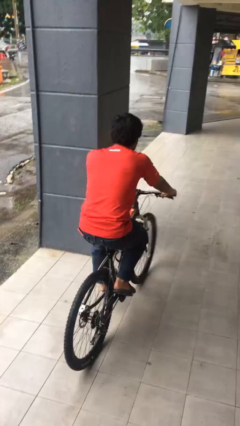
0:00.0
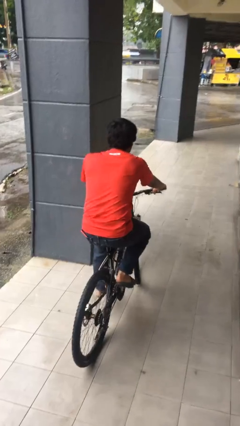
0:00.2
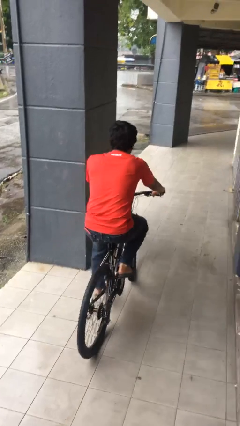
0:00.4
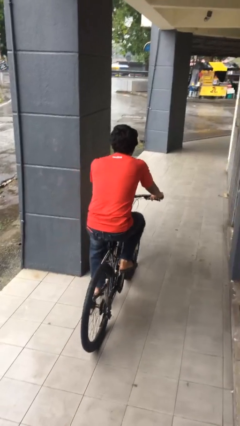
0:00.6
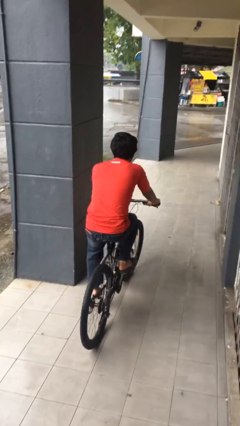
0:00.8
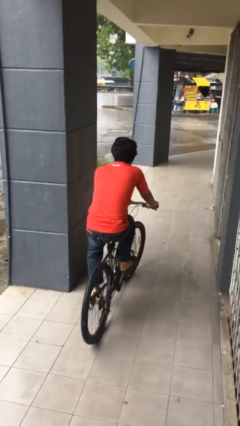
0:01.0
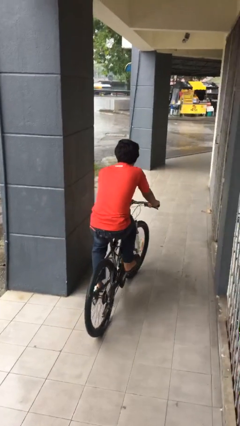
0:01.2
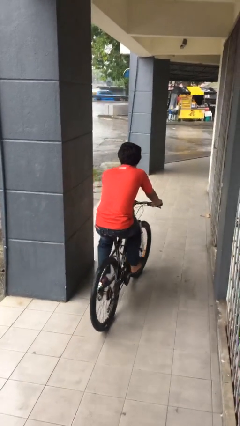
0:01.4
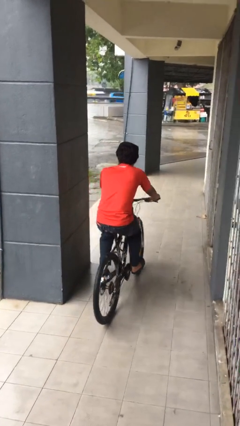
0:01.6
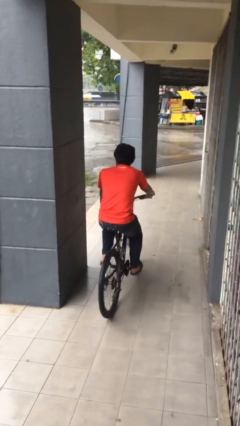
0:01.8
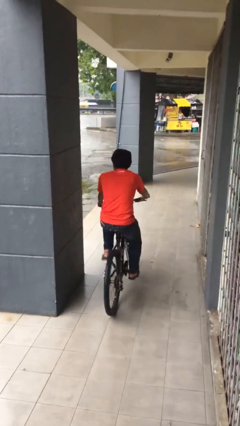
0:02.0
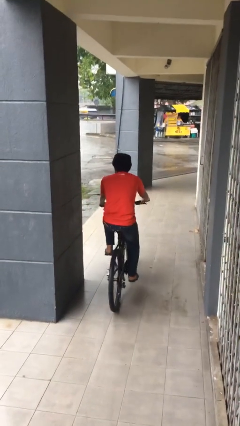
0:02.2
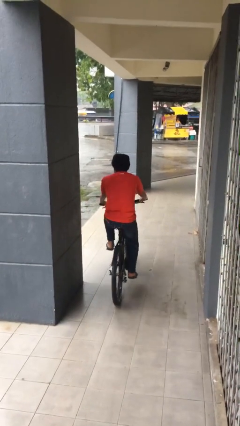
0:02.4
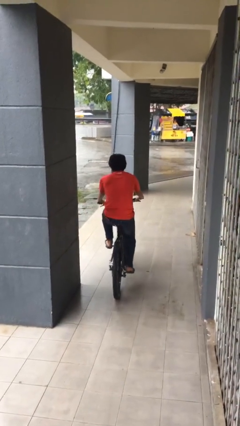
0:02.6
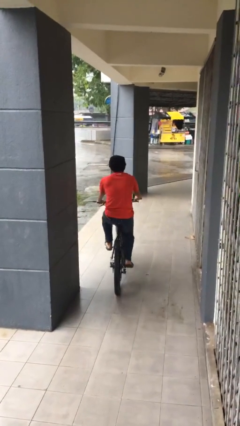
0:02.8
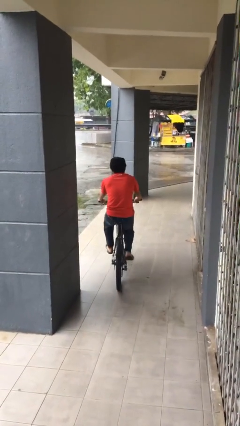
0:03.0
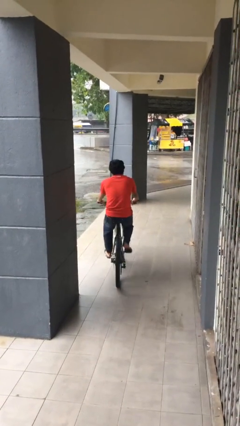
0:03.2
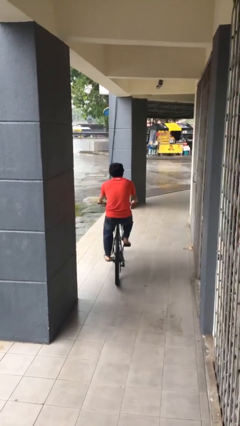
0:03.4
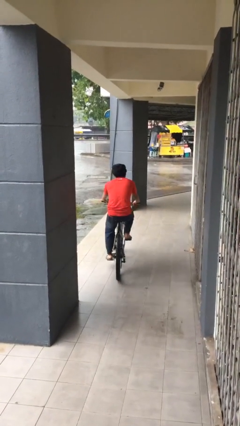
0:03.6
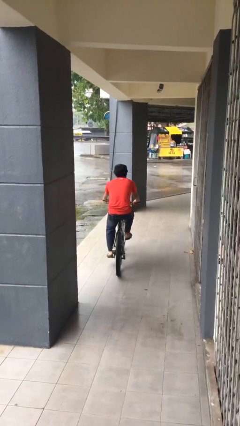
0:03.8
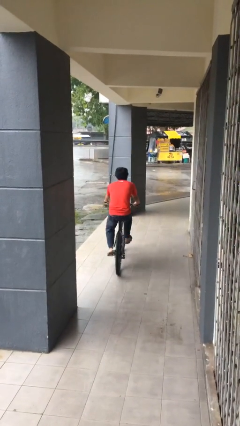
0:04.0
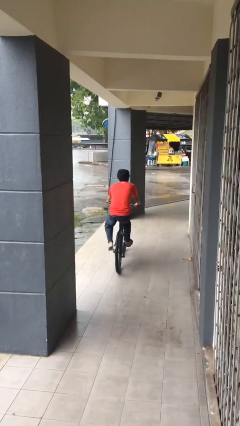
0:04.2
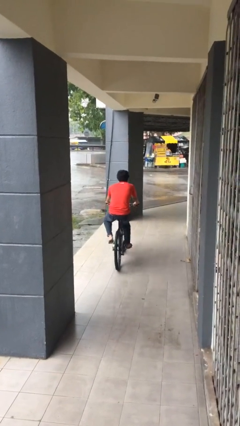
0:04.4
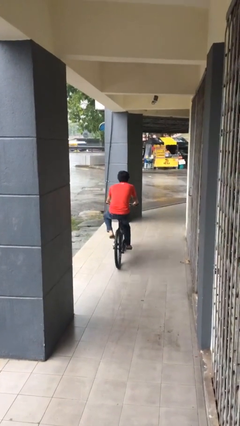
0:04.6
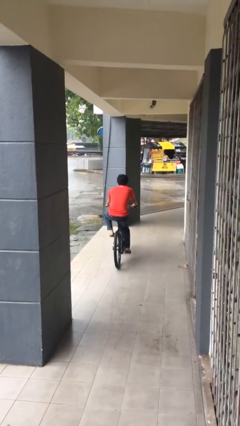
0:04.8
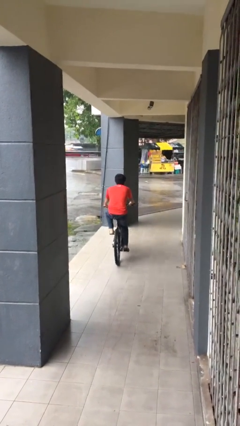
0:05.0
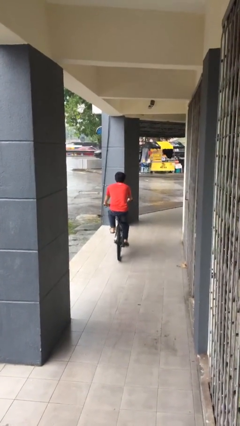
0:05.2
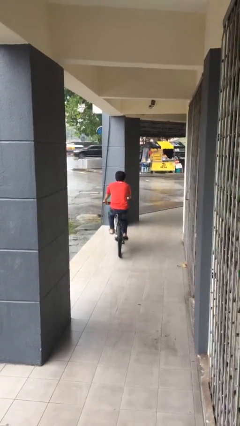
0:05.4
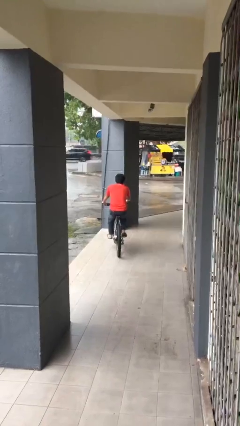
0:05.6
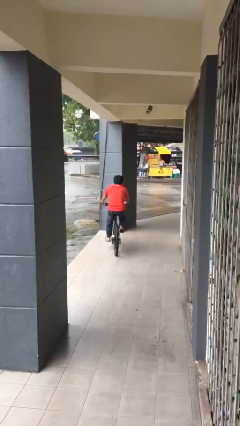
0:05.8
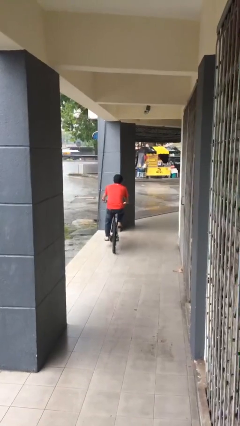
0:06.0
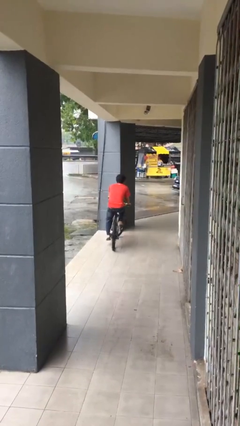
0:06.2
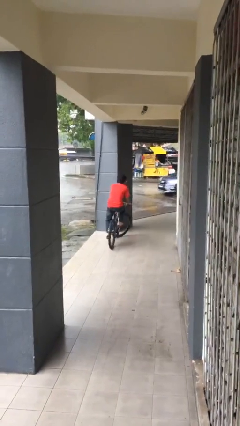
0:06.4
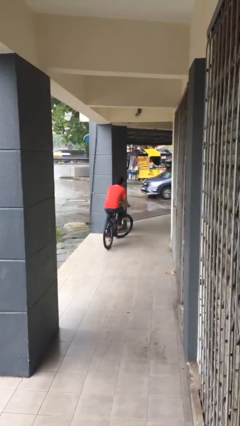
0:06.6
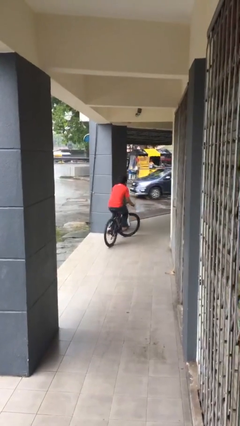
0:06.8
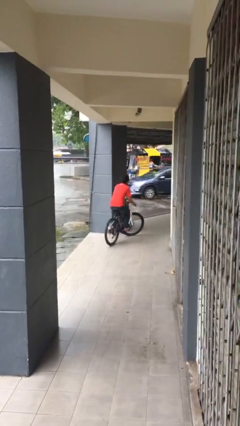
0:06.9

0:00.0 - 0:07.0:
person rides bicycle

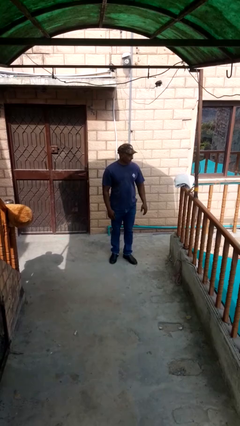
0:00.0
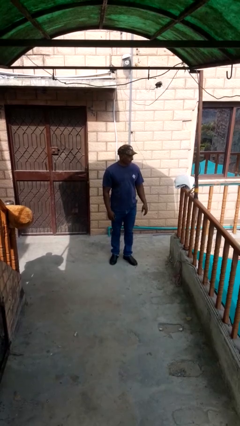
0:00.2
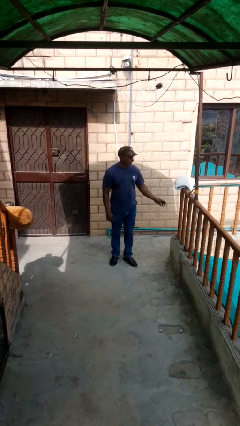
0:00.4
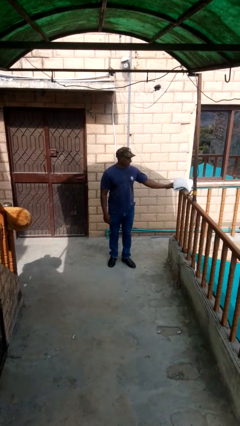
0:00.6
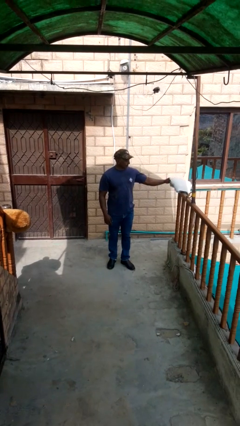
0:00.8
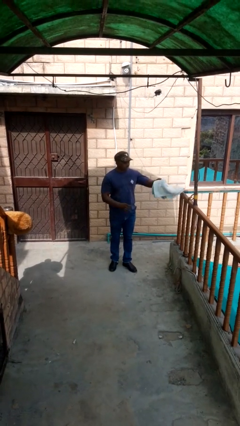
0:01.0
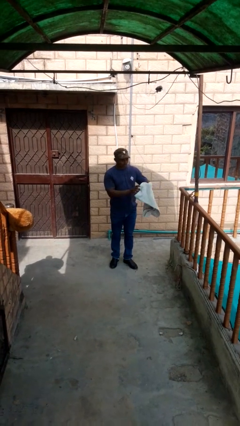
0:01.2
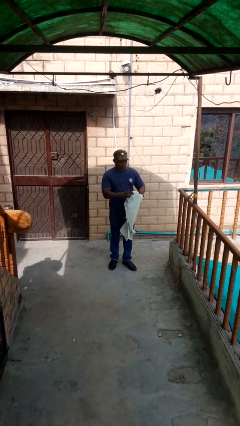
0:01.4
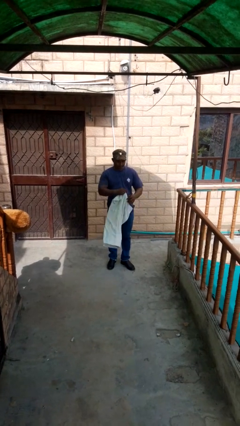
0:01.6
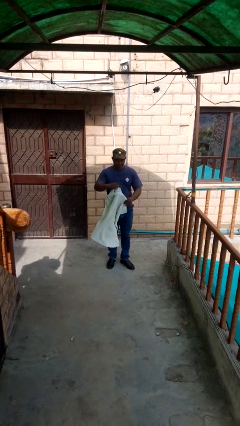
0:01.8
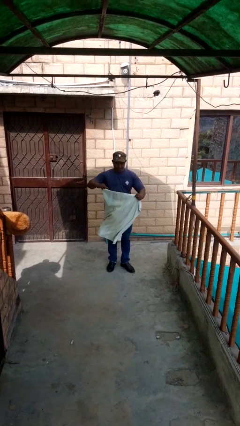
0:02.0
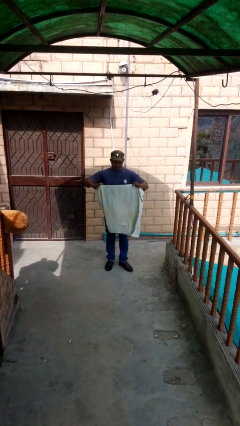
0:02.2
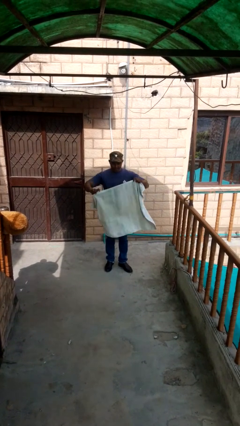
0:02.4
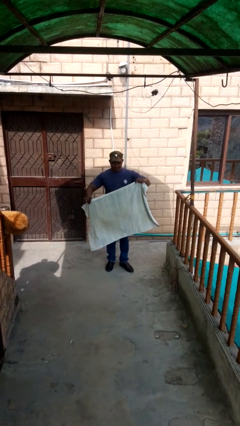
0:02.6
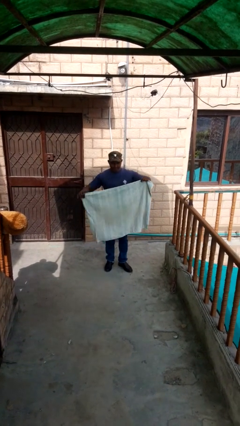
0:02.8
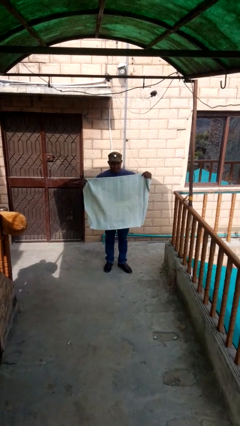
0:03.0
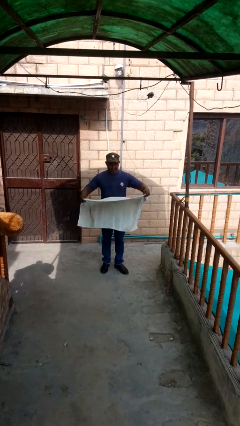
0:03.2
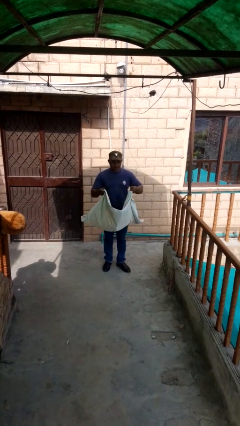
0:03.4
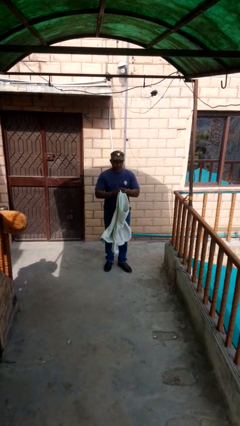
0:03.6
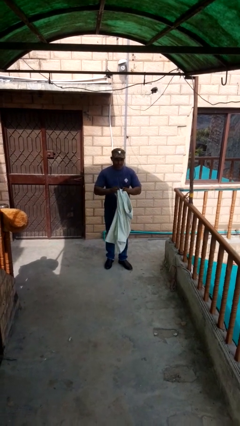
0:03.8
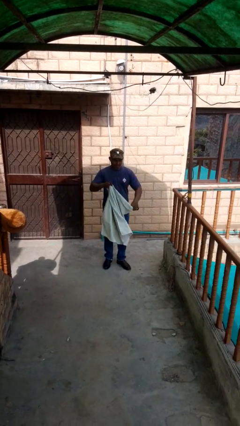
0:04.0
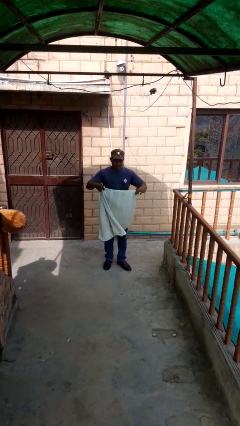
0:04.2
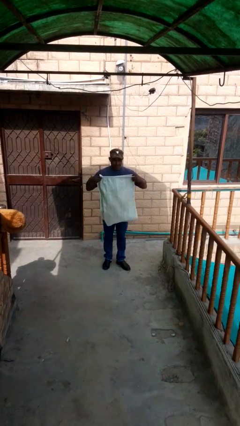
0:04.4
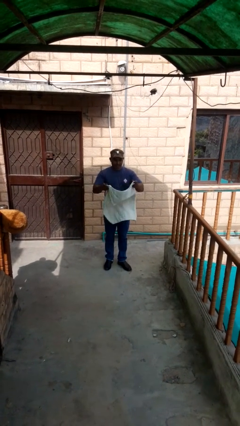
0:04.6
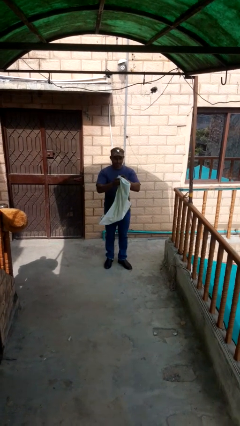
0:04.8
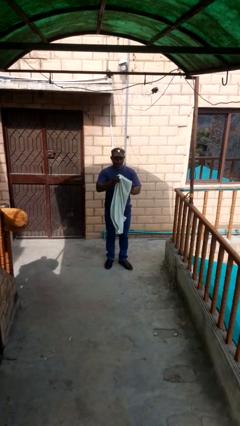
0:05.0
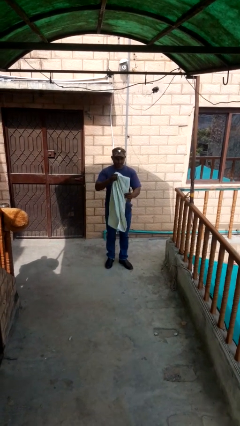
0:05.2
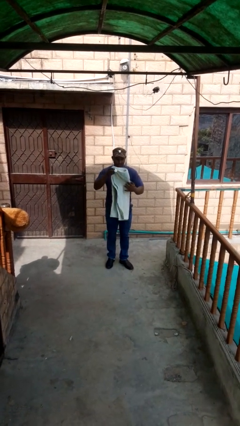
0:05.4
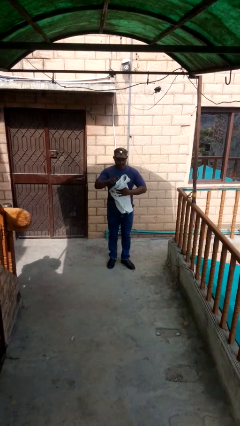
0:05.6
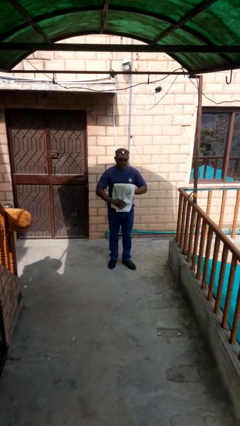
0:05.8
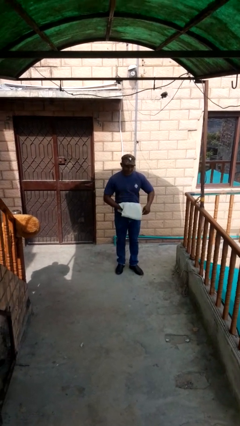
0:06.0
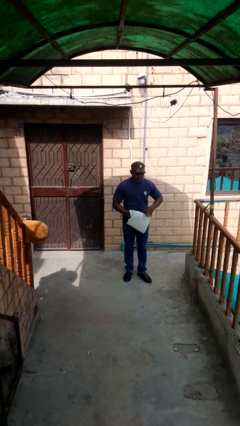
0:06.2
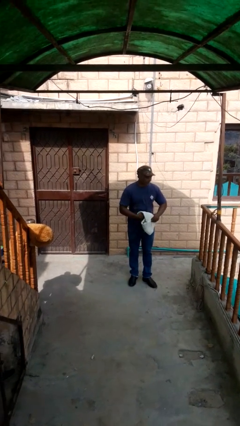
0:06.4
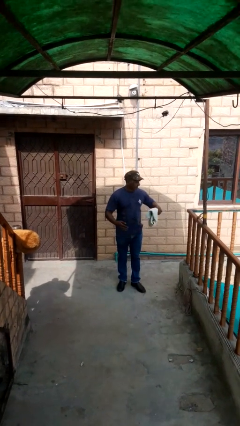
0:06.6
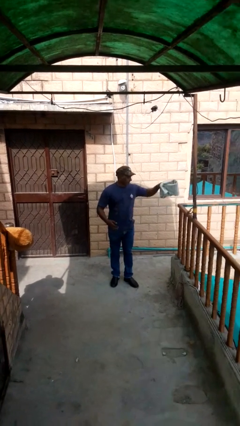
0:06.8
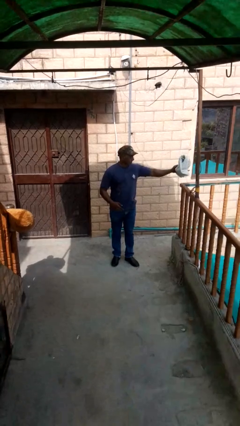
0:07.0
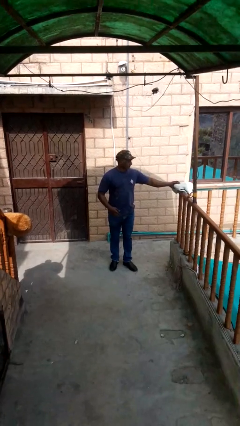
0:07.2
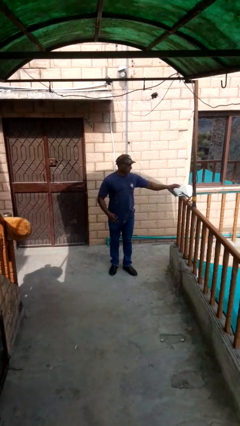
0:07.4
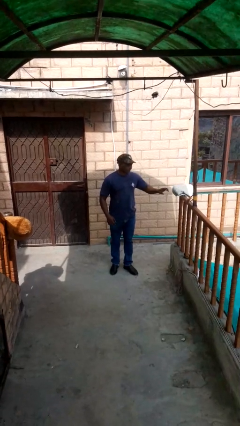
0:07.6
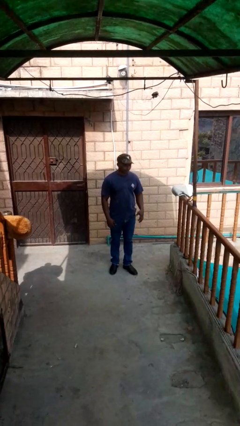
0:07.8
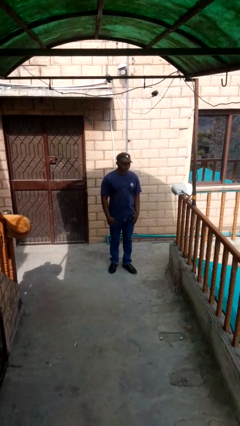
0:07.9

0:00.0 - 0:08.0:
person folds towel

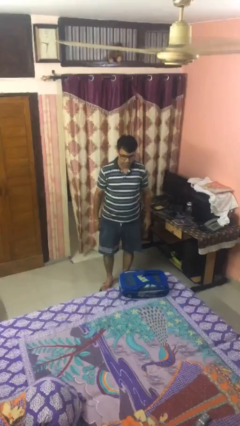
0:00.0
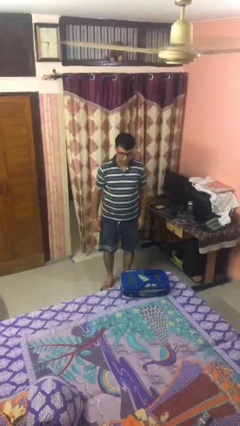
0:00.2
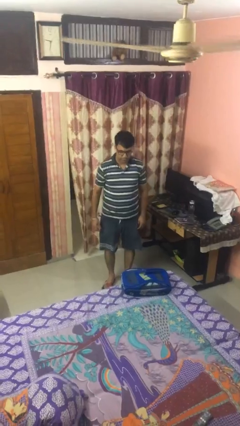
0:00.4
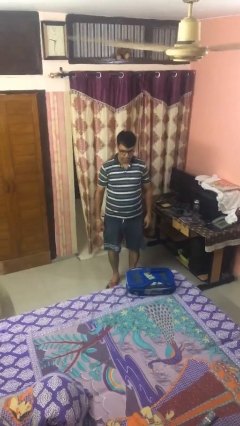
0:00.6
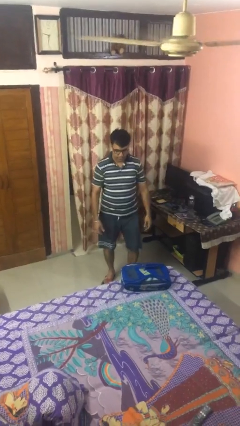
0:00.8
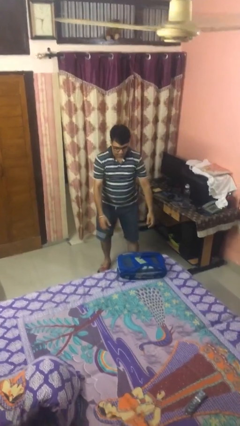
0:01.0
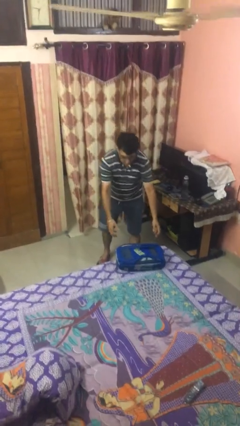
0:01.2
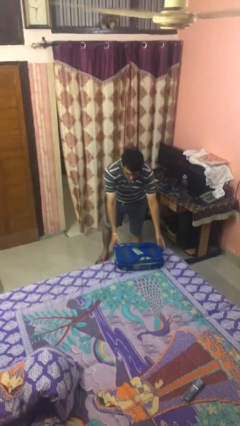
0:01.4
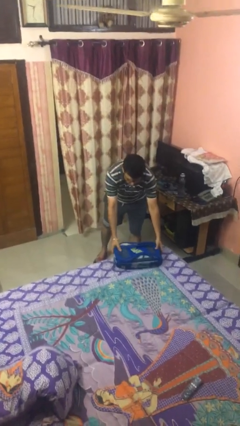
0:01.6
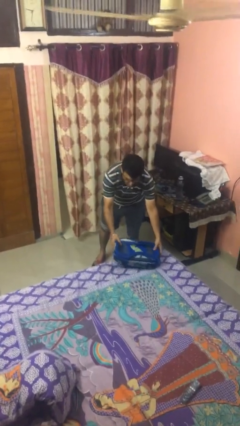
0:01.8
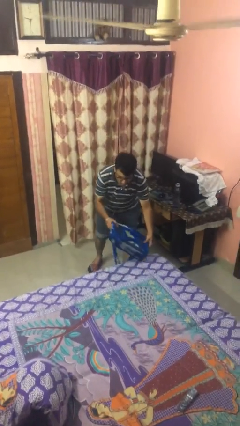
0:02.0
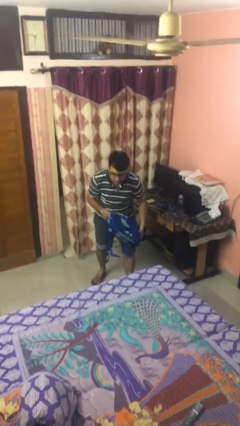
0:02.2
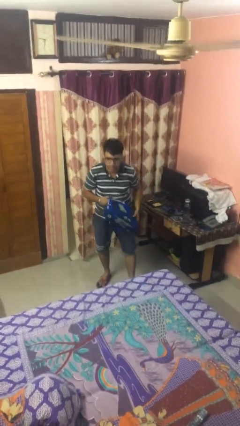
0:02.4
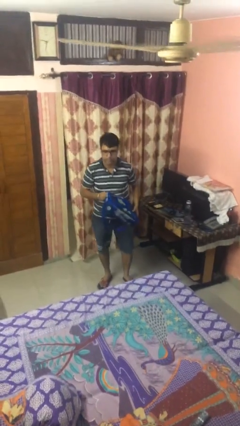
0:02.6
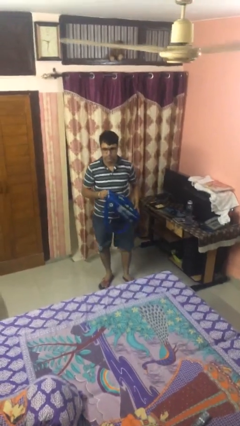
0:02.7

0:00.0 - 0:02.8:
person picks up object from bed

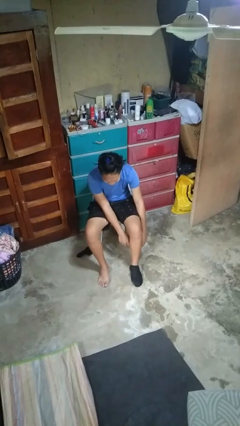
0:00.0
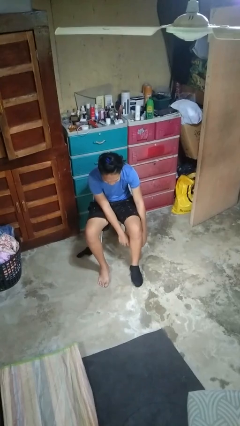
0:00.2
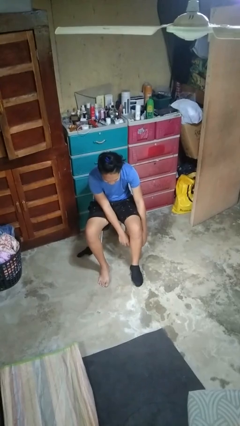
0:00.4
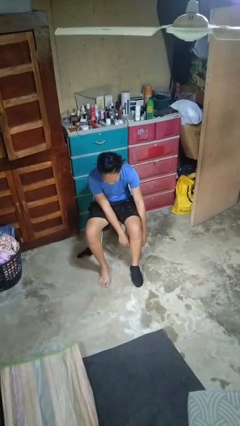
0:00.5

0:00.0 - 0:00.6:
person takes off socks
